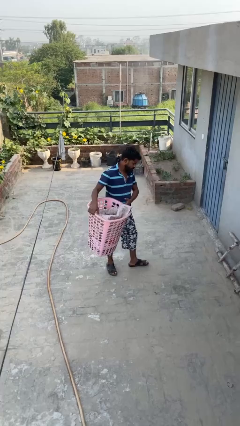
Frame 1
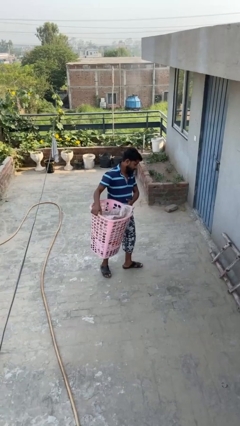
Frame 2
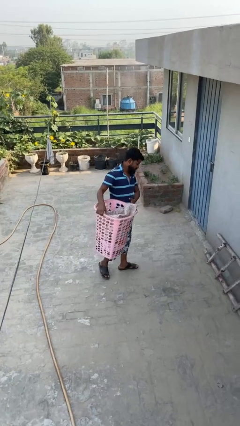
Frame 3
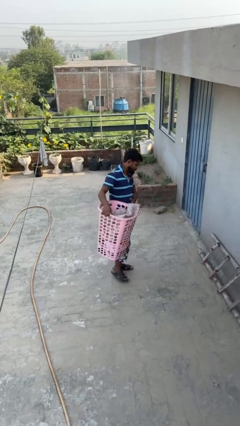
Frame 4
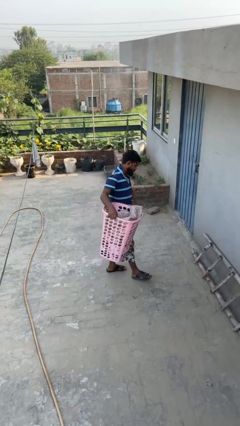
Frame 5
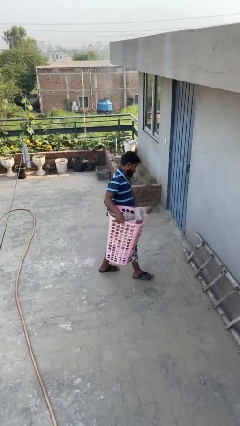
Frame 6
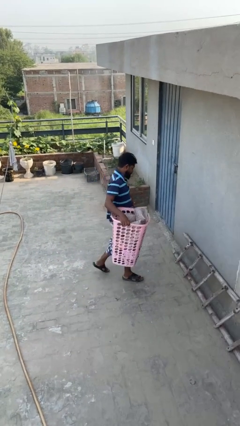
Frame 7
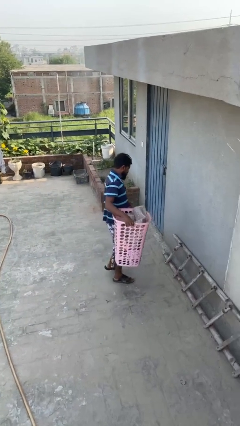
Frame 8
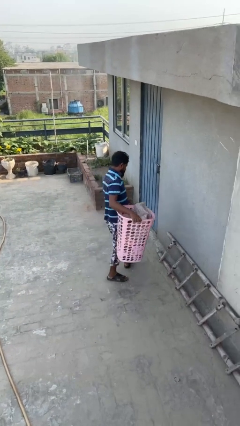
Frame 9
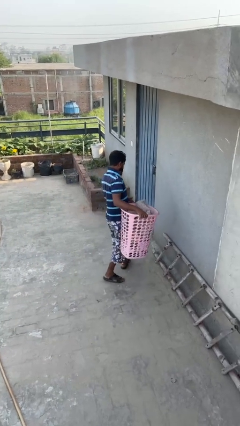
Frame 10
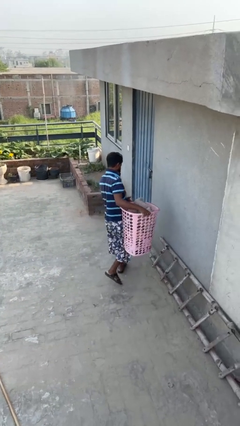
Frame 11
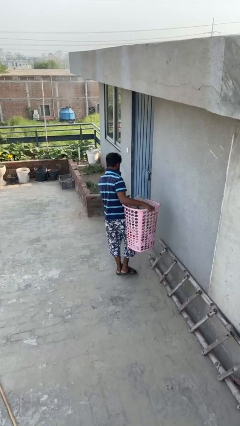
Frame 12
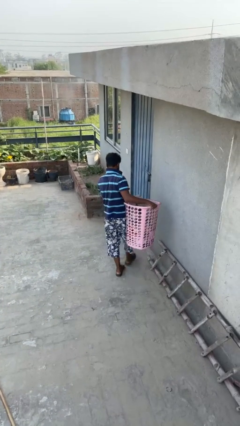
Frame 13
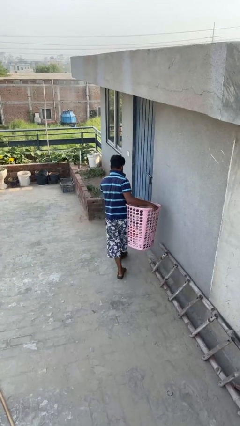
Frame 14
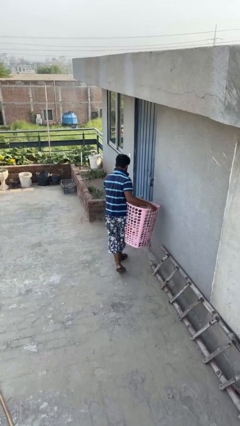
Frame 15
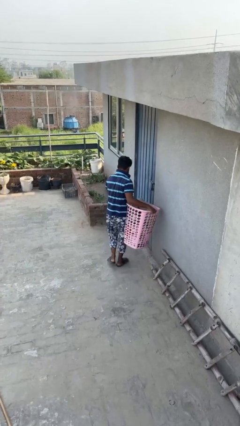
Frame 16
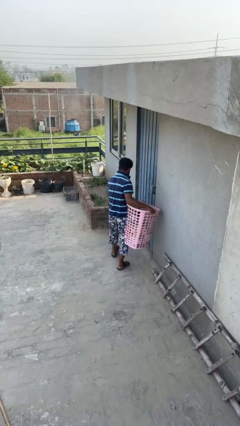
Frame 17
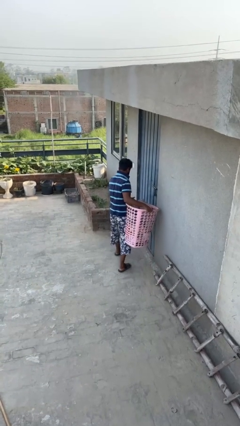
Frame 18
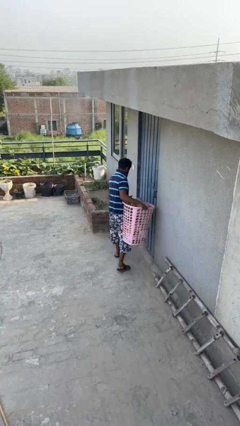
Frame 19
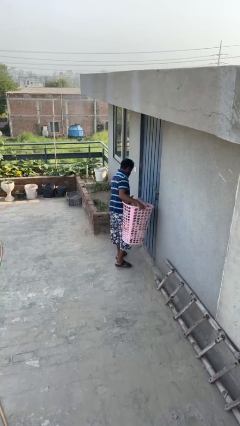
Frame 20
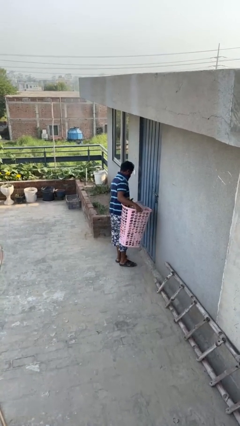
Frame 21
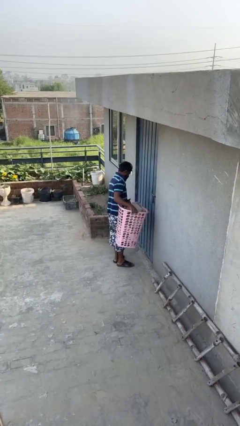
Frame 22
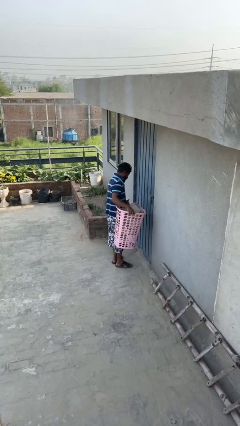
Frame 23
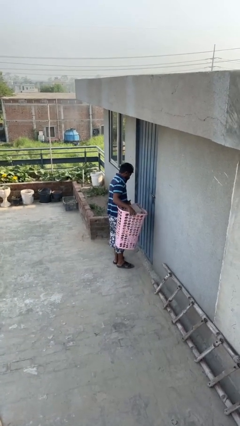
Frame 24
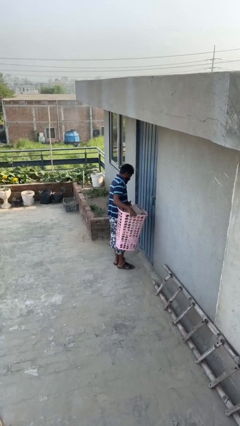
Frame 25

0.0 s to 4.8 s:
person carries laundry basket

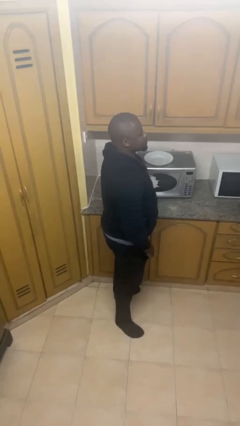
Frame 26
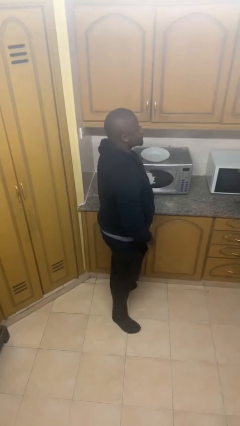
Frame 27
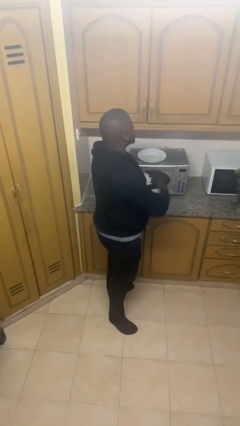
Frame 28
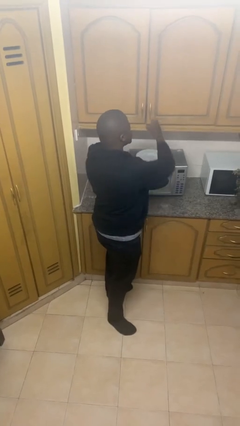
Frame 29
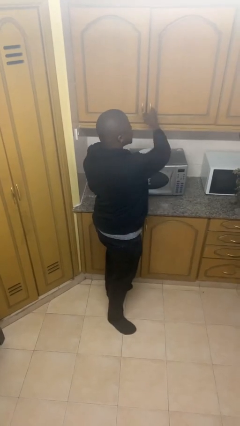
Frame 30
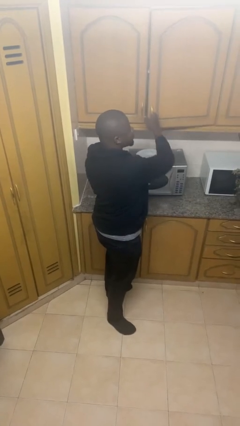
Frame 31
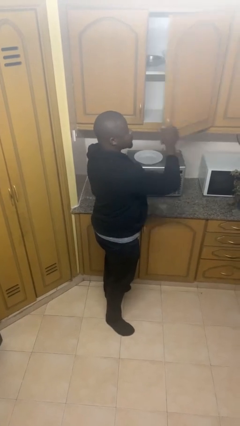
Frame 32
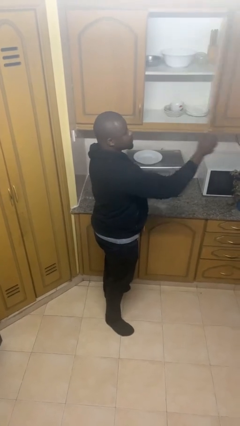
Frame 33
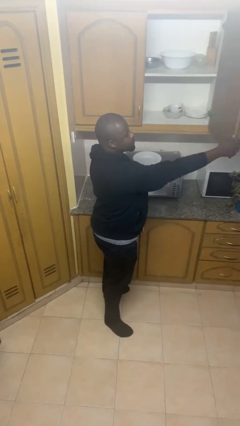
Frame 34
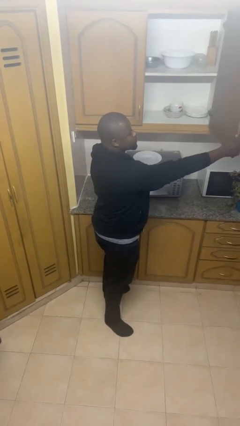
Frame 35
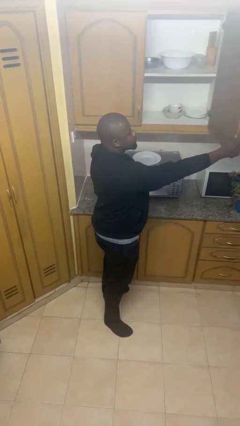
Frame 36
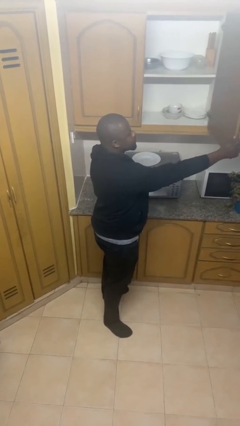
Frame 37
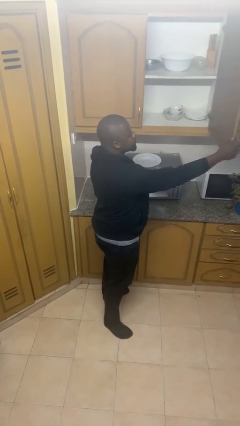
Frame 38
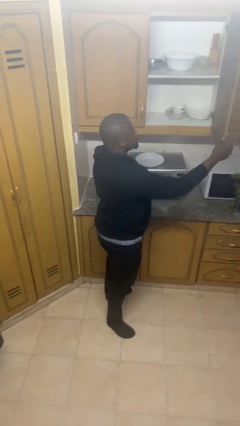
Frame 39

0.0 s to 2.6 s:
person opens cabinet

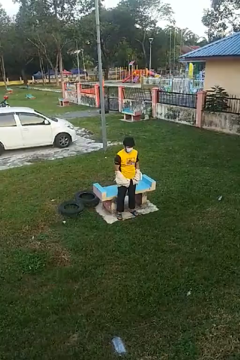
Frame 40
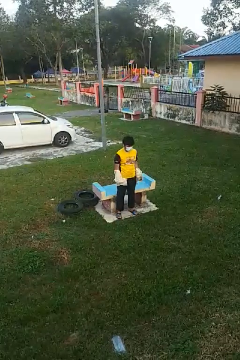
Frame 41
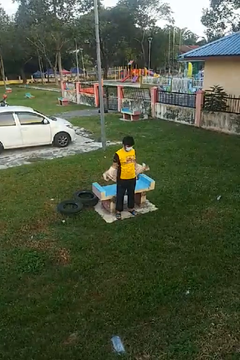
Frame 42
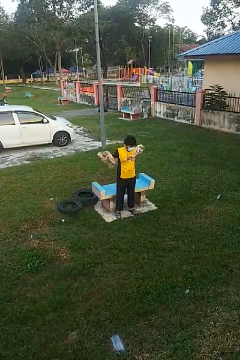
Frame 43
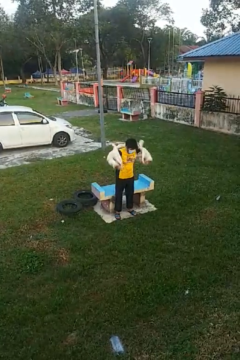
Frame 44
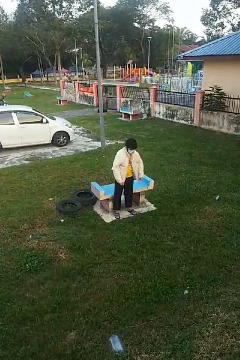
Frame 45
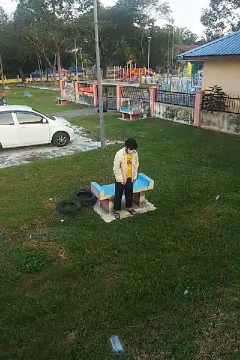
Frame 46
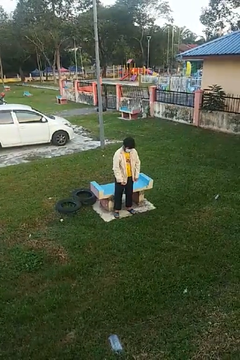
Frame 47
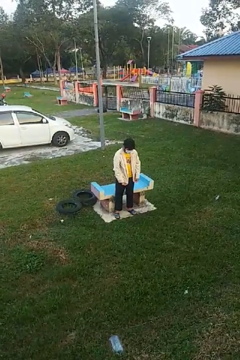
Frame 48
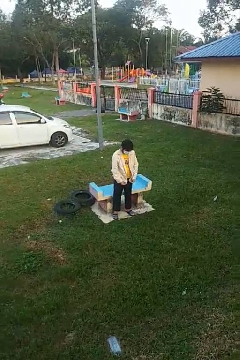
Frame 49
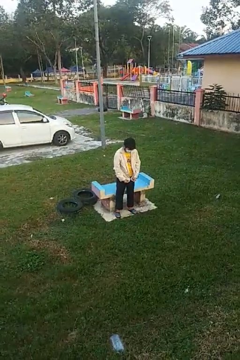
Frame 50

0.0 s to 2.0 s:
person puts on jacket

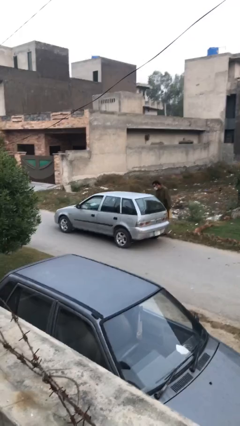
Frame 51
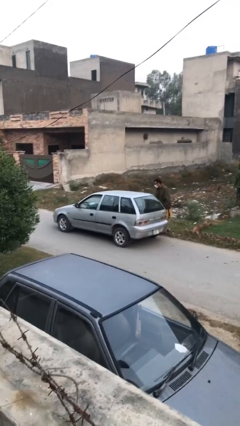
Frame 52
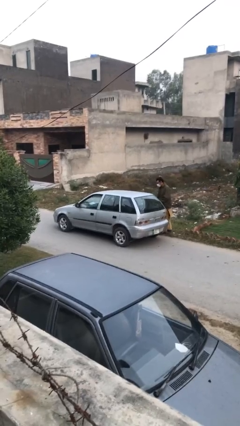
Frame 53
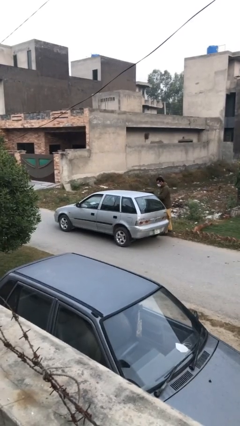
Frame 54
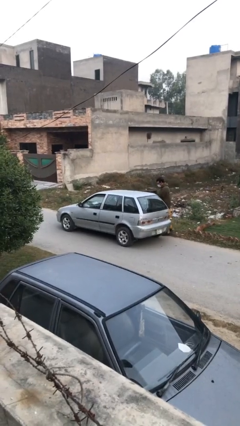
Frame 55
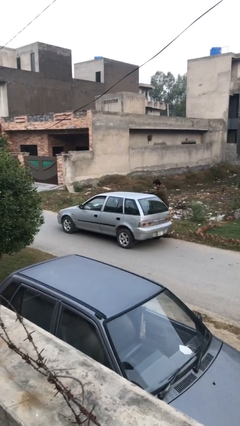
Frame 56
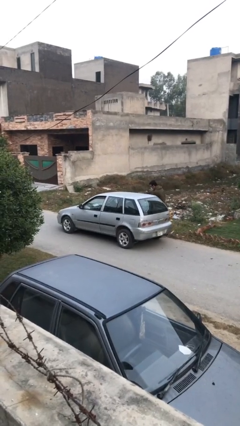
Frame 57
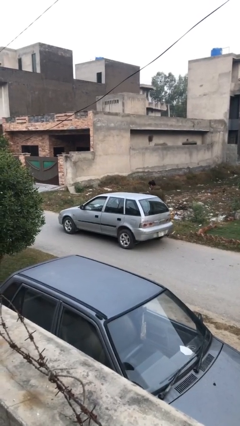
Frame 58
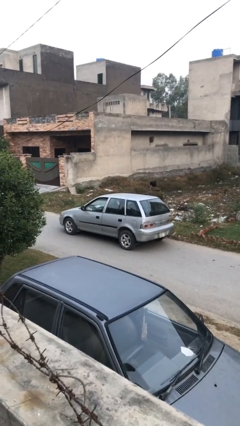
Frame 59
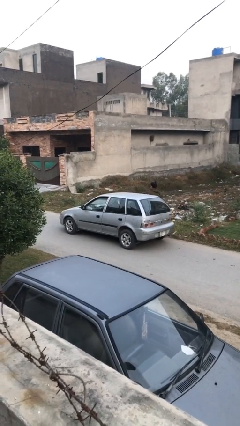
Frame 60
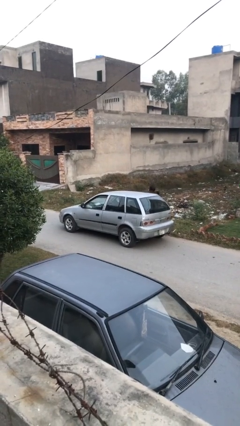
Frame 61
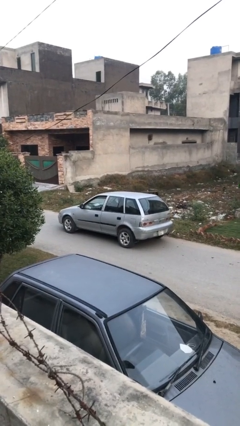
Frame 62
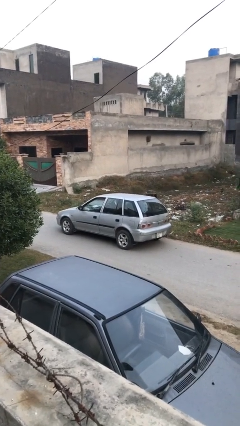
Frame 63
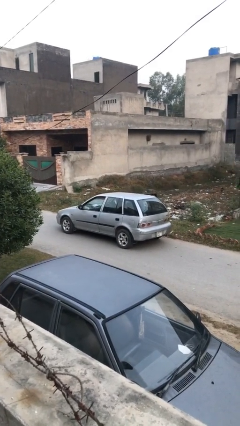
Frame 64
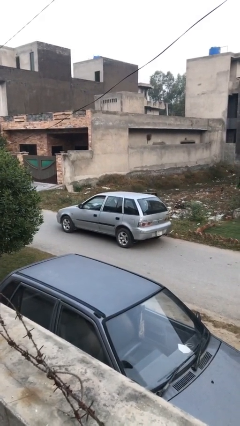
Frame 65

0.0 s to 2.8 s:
car picks up person

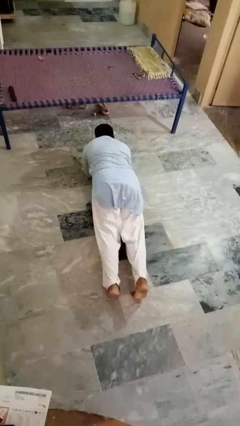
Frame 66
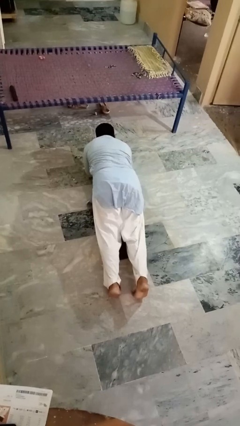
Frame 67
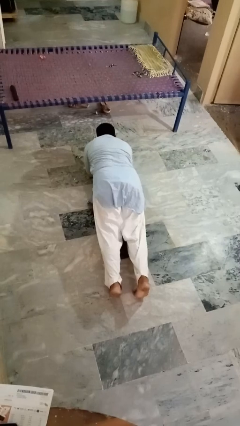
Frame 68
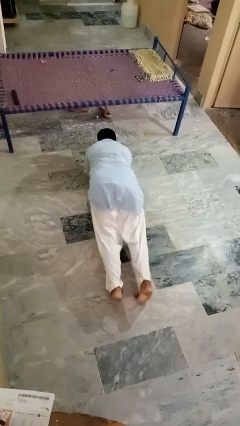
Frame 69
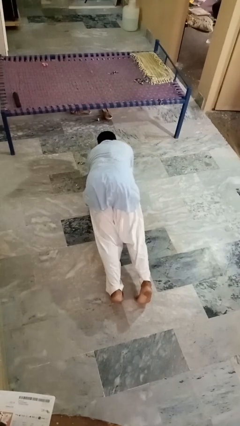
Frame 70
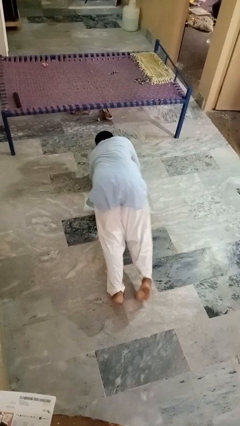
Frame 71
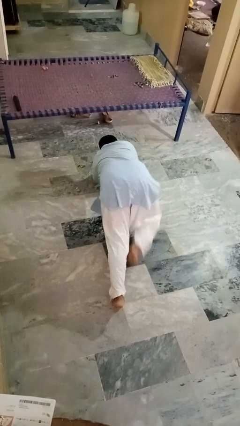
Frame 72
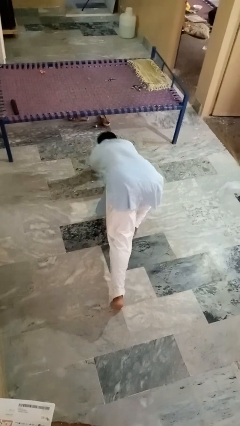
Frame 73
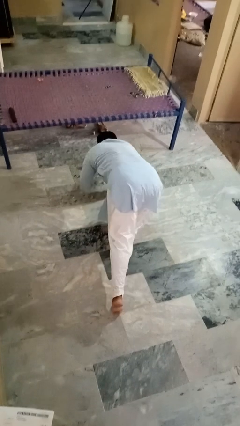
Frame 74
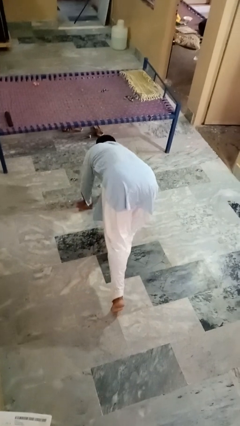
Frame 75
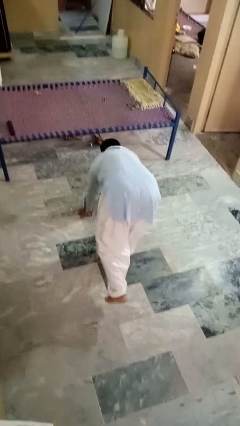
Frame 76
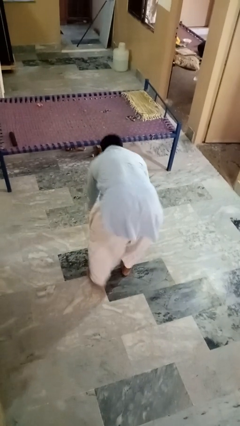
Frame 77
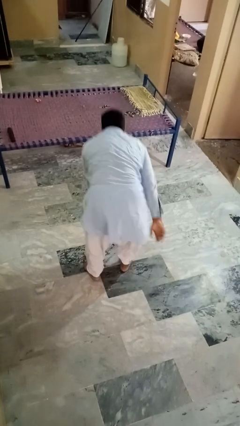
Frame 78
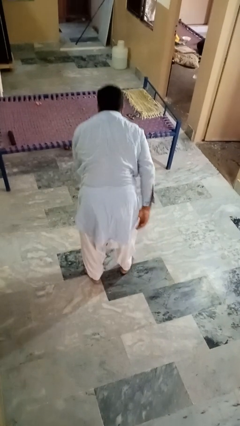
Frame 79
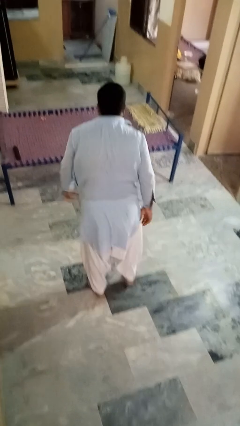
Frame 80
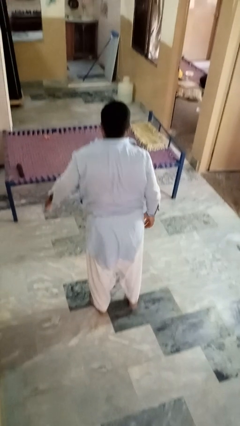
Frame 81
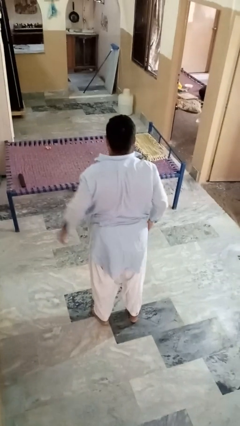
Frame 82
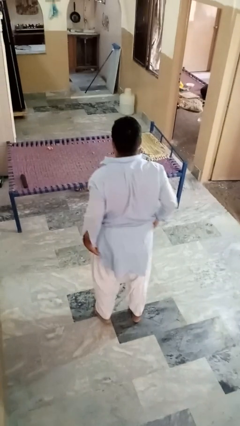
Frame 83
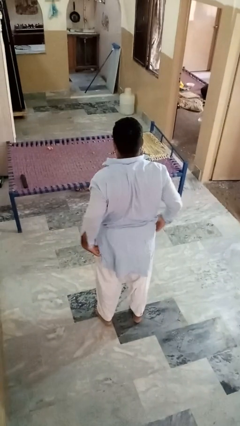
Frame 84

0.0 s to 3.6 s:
person stands up from floor

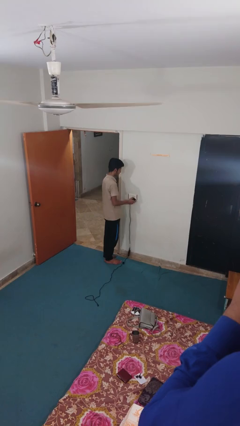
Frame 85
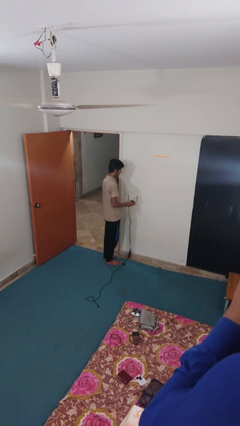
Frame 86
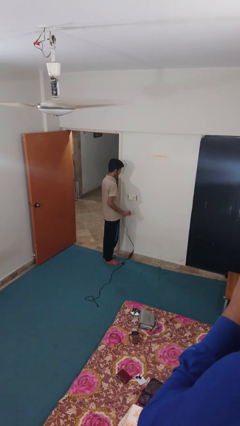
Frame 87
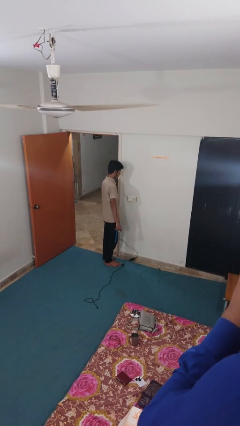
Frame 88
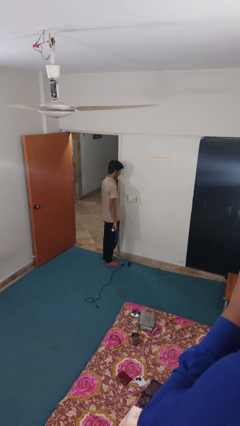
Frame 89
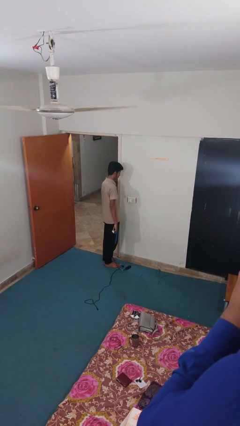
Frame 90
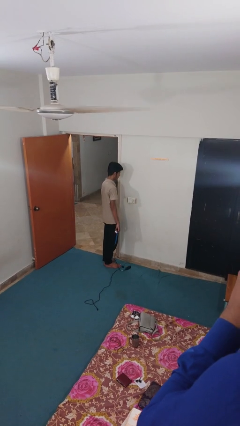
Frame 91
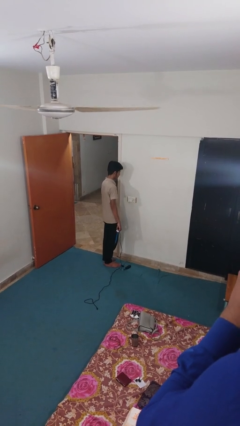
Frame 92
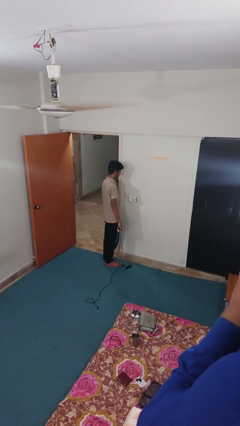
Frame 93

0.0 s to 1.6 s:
person unplugs from electrical socket
